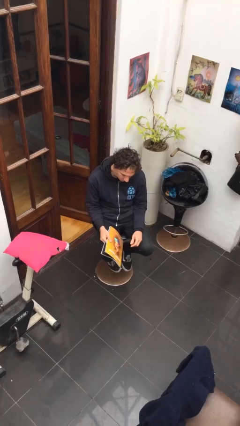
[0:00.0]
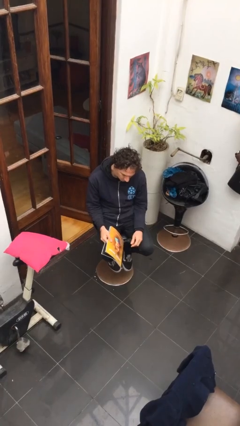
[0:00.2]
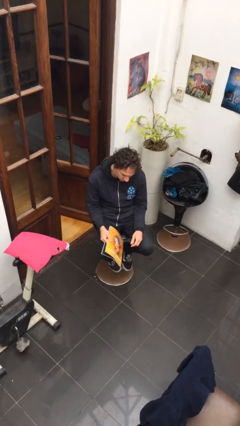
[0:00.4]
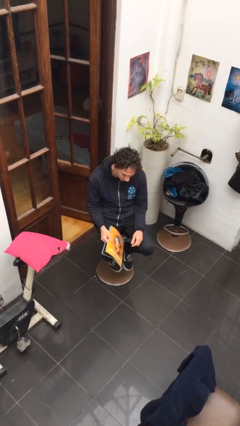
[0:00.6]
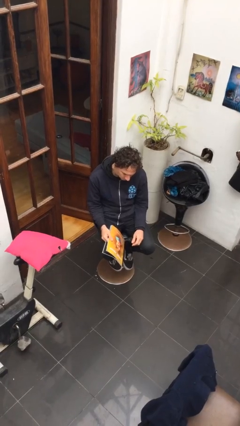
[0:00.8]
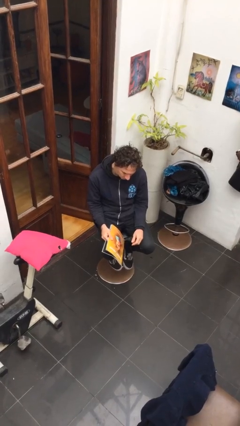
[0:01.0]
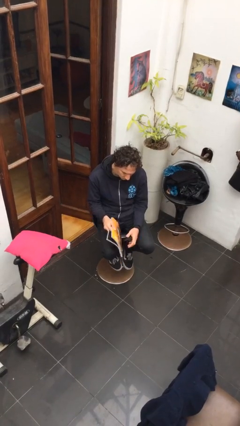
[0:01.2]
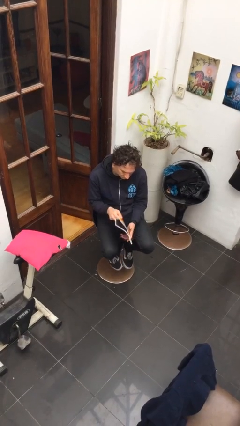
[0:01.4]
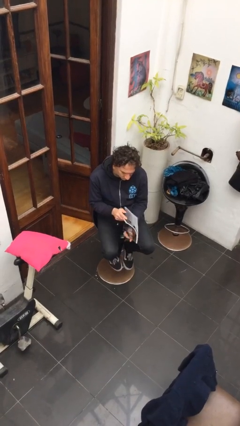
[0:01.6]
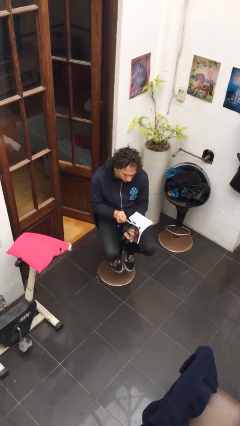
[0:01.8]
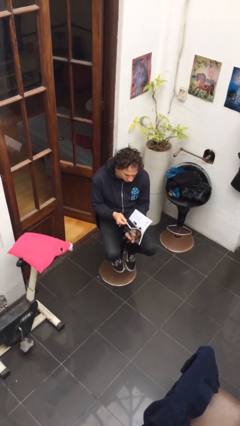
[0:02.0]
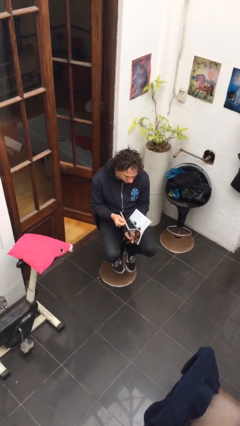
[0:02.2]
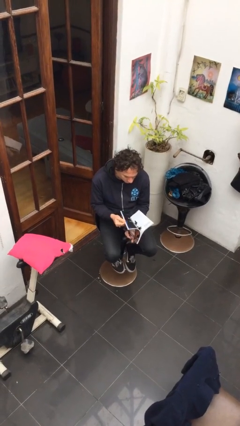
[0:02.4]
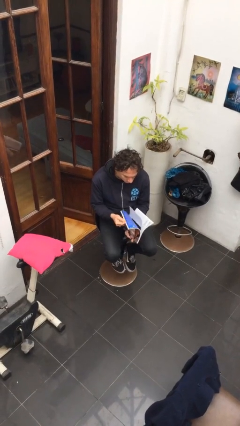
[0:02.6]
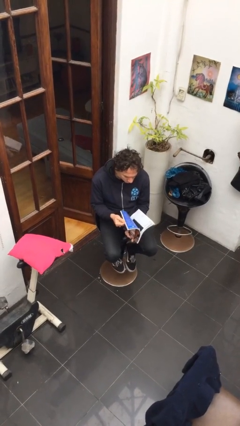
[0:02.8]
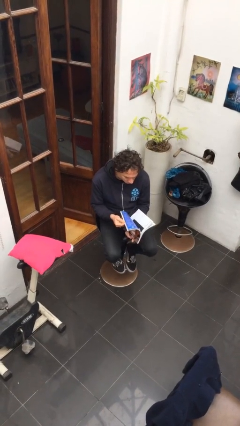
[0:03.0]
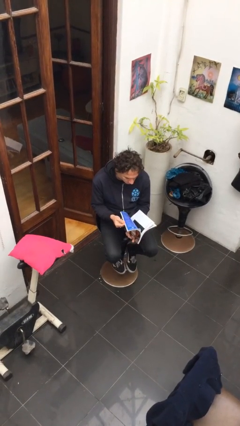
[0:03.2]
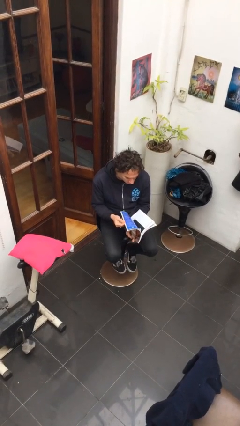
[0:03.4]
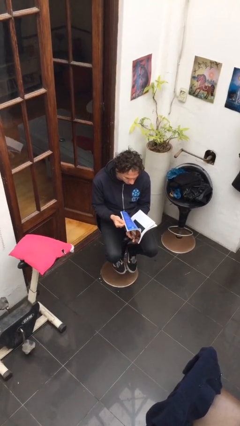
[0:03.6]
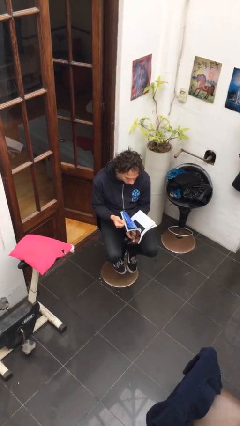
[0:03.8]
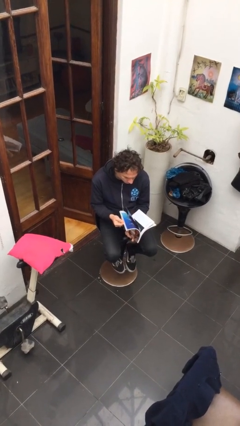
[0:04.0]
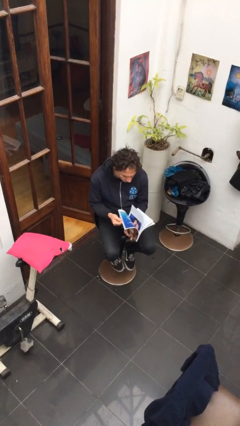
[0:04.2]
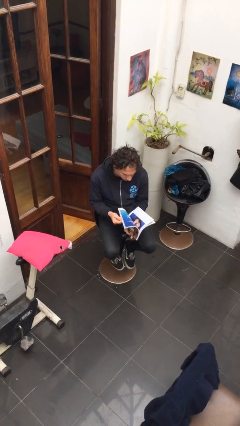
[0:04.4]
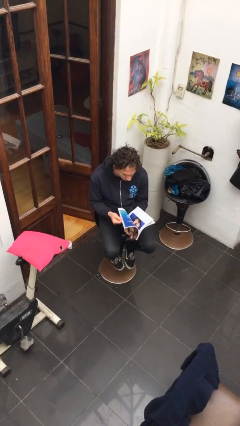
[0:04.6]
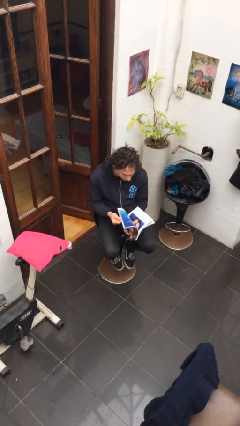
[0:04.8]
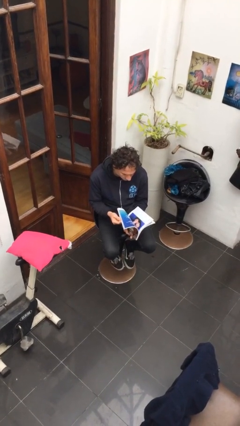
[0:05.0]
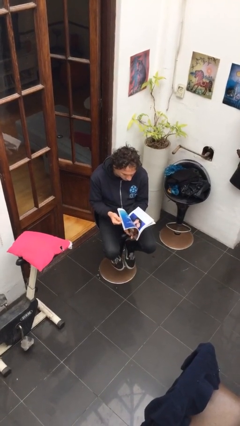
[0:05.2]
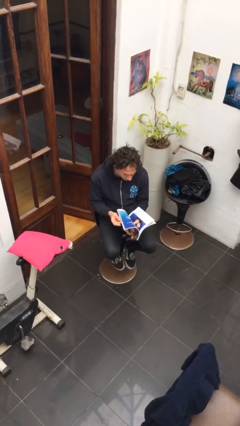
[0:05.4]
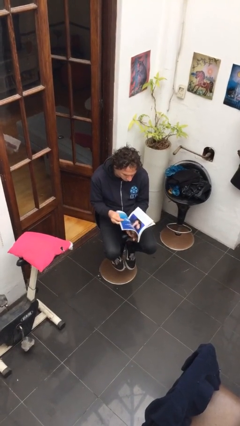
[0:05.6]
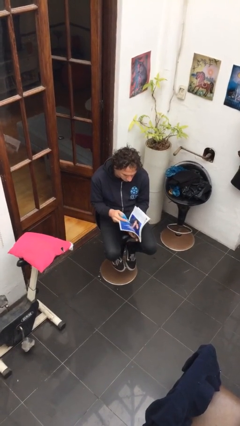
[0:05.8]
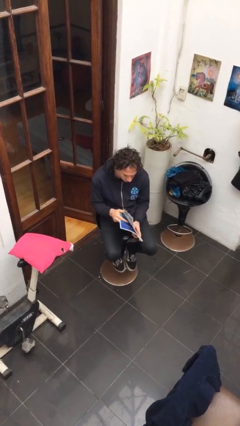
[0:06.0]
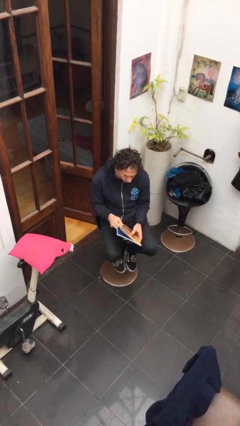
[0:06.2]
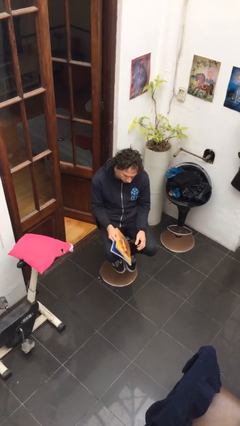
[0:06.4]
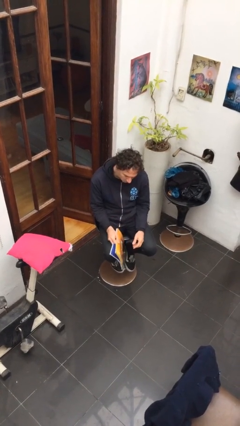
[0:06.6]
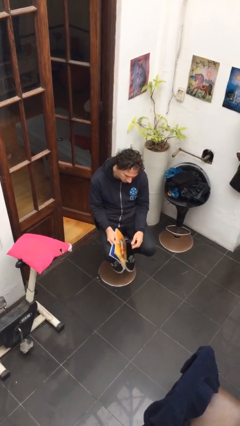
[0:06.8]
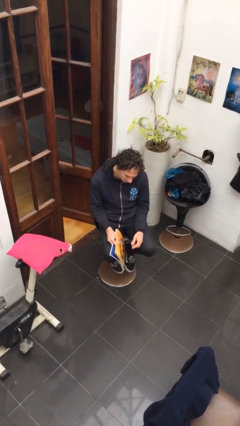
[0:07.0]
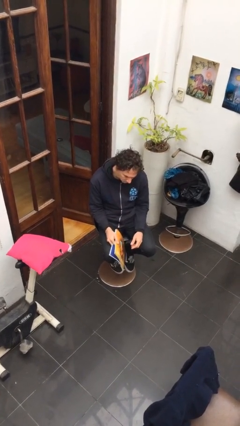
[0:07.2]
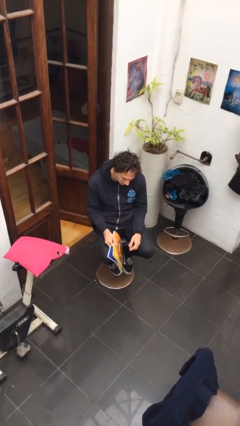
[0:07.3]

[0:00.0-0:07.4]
person reads magazine

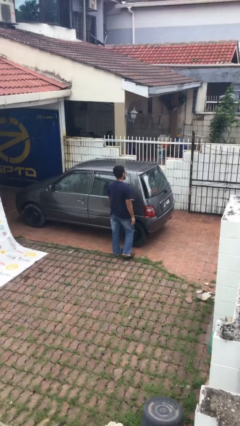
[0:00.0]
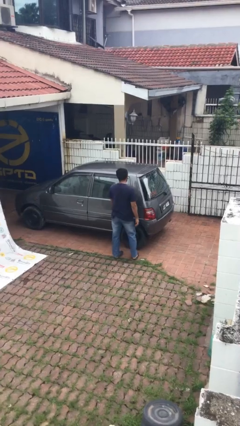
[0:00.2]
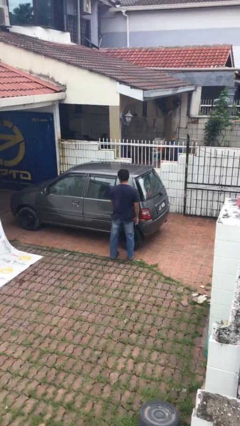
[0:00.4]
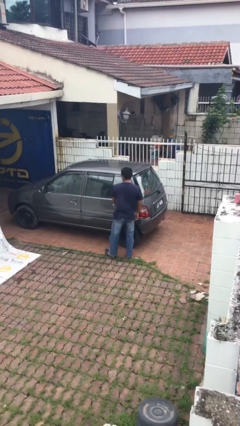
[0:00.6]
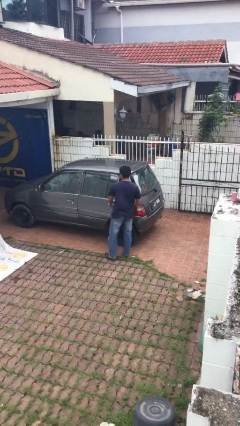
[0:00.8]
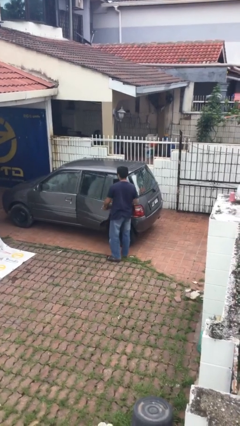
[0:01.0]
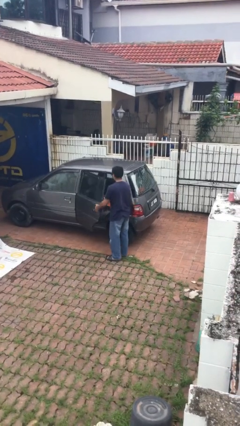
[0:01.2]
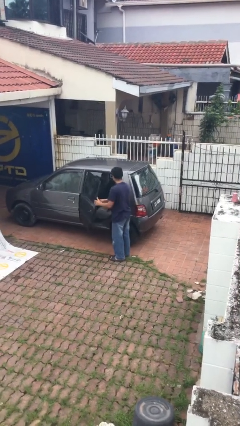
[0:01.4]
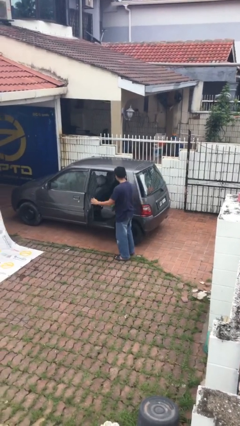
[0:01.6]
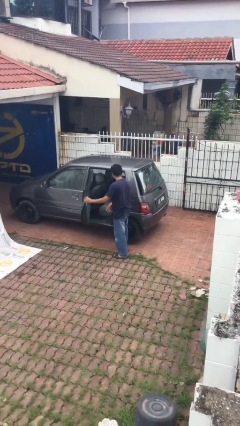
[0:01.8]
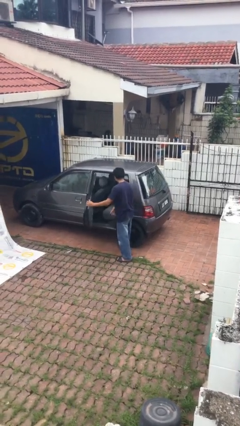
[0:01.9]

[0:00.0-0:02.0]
person opens car door

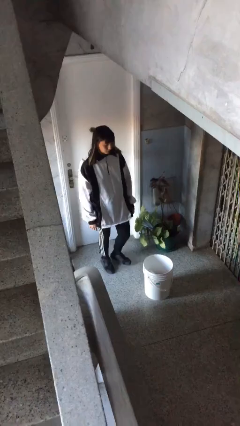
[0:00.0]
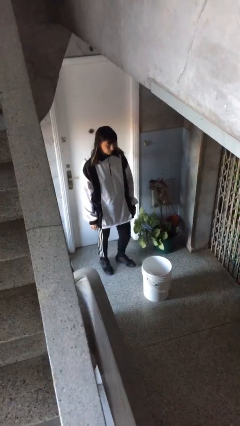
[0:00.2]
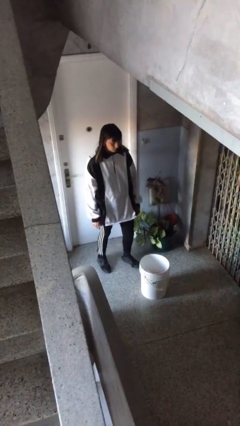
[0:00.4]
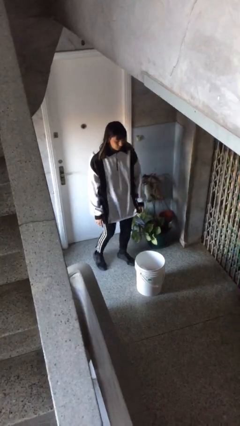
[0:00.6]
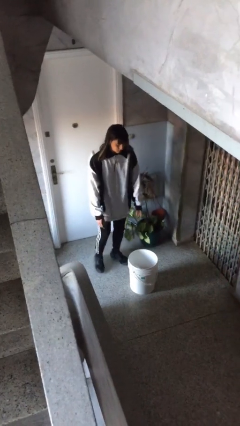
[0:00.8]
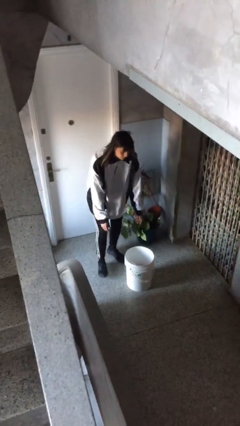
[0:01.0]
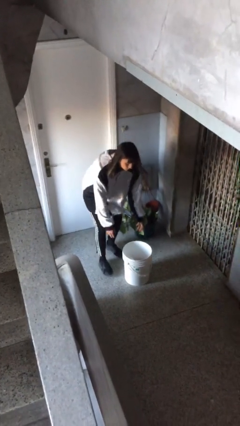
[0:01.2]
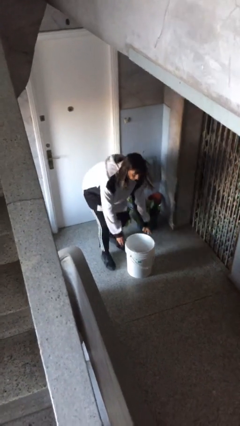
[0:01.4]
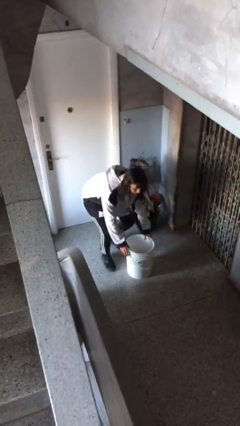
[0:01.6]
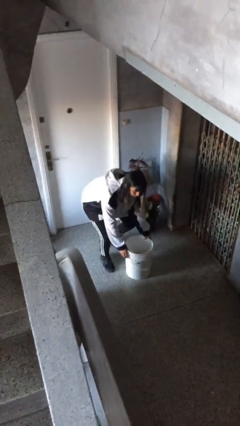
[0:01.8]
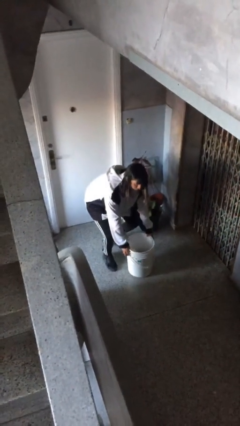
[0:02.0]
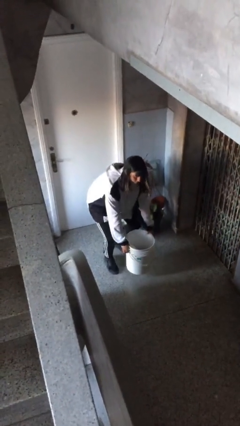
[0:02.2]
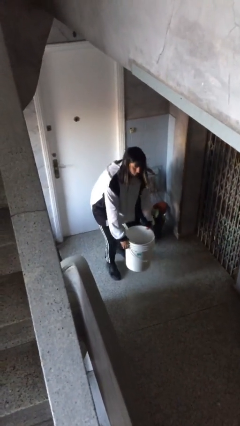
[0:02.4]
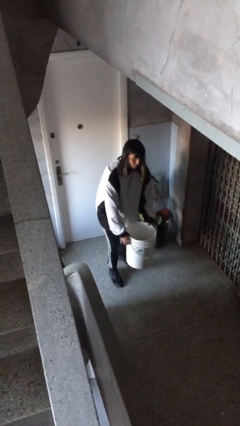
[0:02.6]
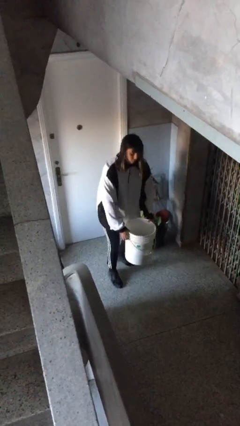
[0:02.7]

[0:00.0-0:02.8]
person picks up object from floor

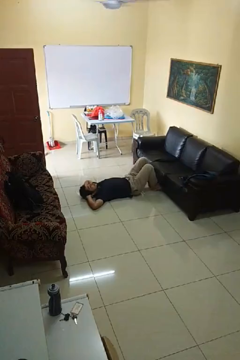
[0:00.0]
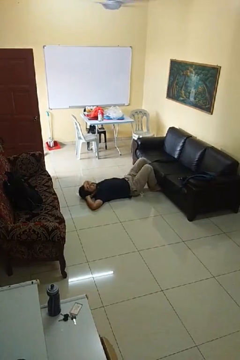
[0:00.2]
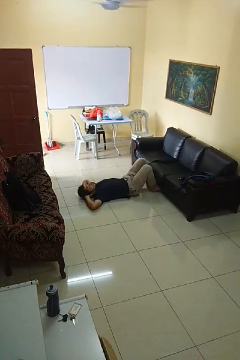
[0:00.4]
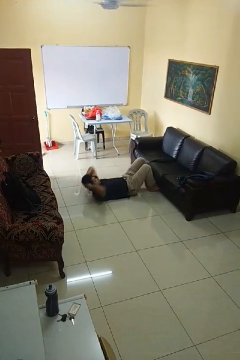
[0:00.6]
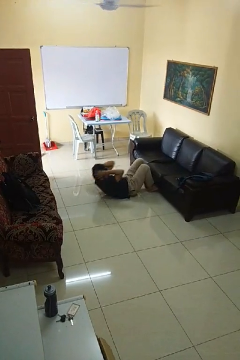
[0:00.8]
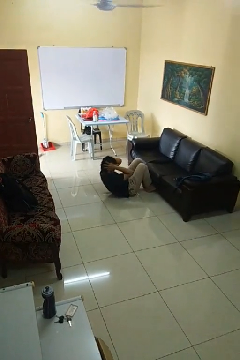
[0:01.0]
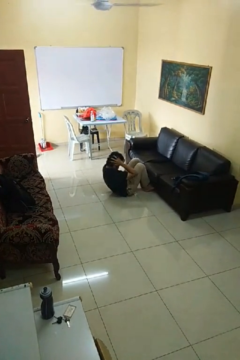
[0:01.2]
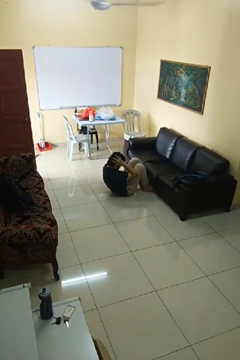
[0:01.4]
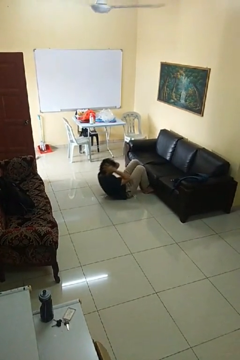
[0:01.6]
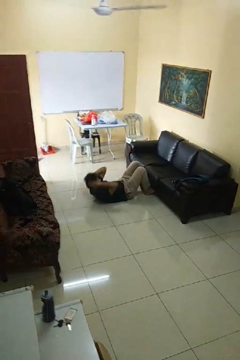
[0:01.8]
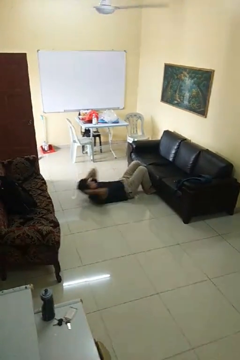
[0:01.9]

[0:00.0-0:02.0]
person exercises with situp

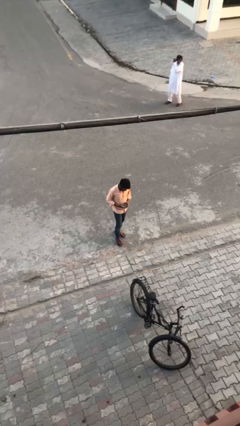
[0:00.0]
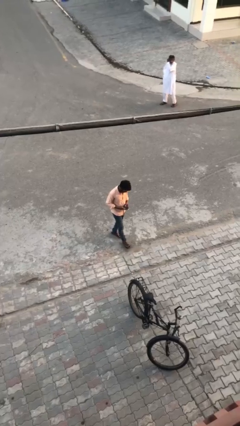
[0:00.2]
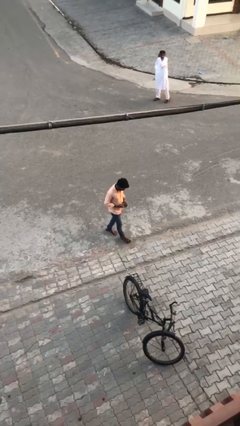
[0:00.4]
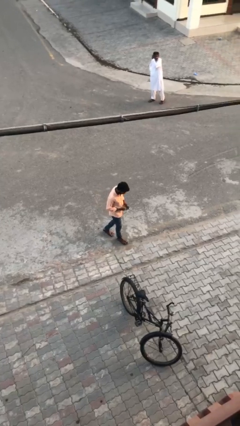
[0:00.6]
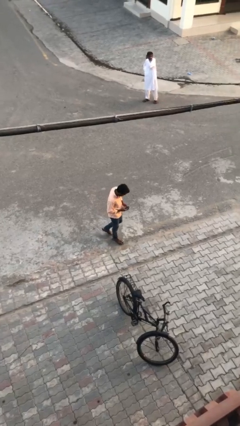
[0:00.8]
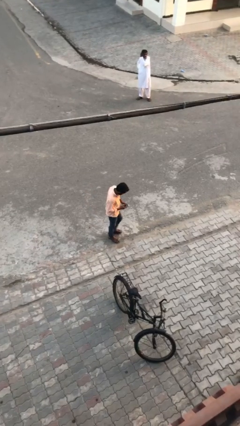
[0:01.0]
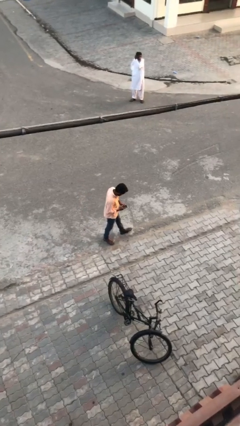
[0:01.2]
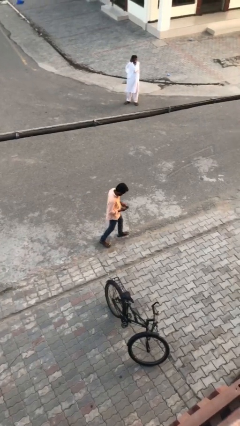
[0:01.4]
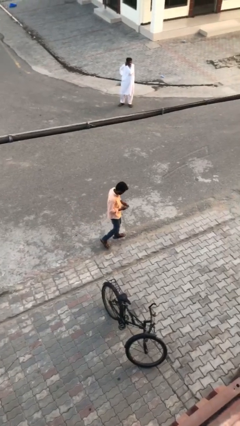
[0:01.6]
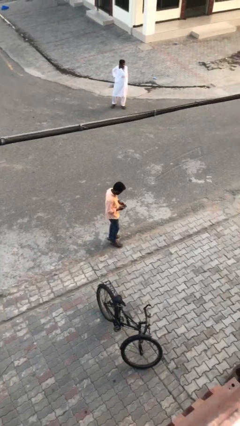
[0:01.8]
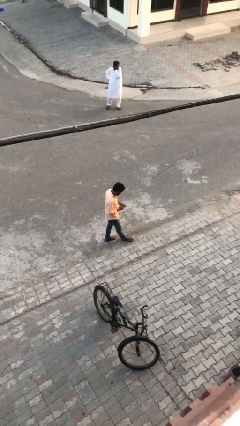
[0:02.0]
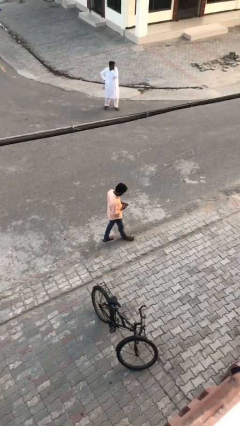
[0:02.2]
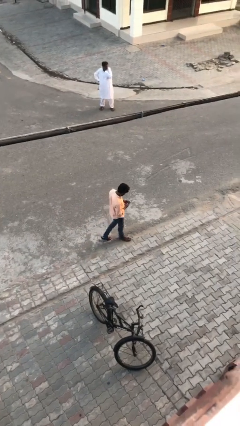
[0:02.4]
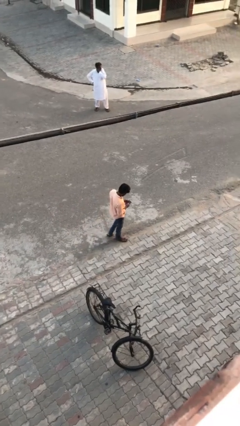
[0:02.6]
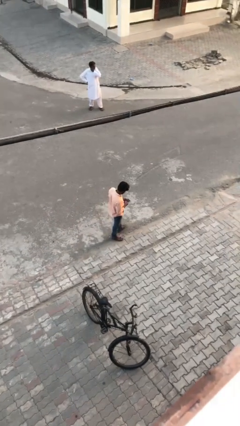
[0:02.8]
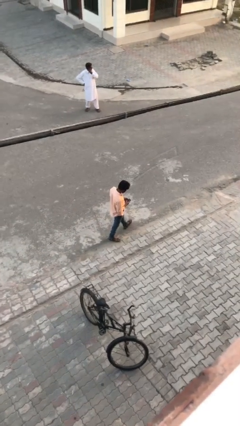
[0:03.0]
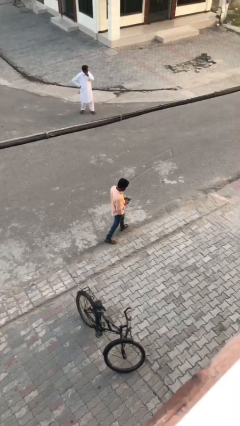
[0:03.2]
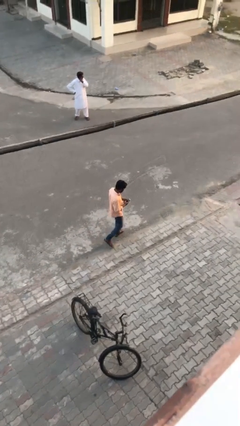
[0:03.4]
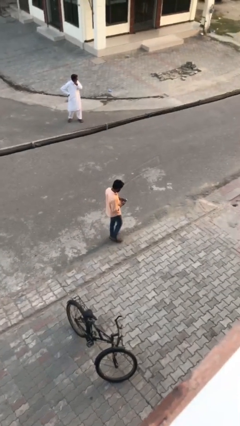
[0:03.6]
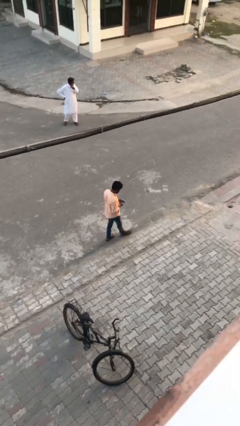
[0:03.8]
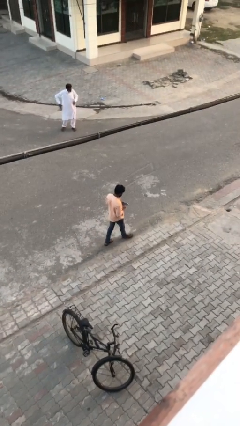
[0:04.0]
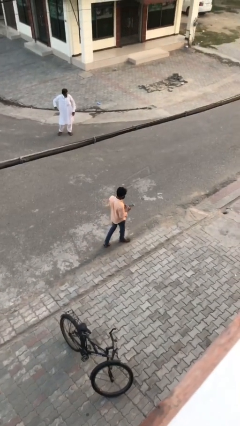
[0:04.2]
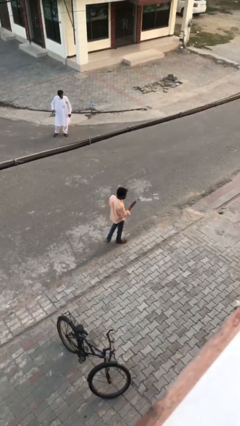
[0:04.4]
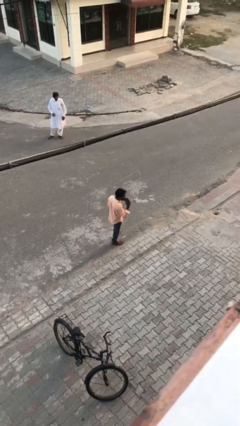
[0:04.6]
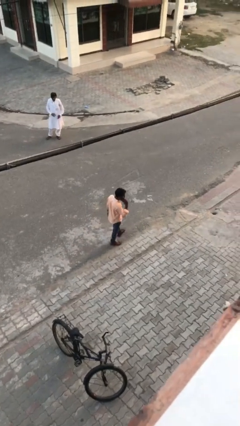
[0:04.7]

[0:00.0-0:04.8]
person texts on phone
